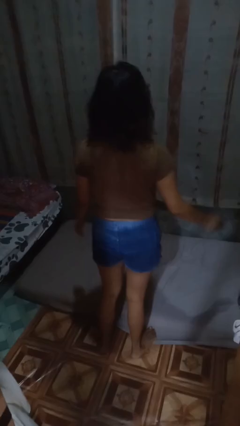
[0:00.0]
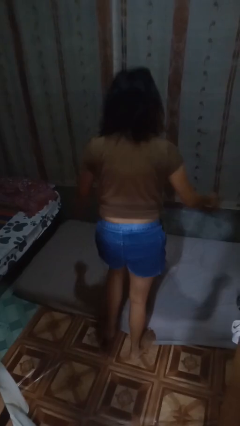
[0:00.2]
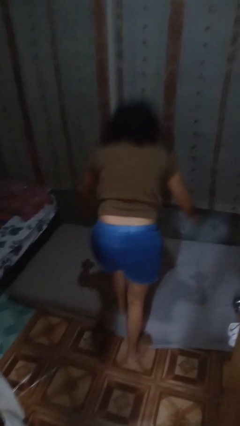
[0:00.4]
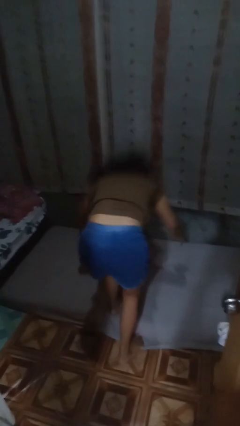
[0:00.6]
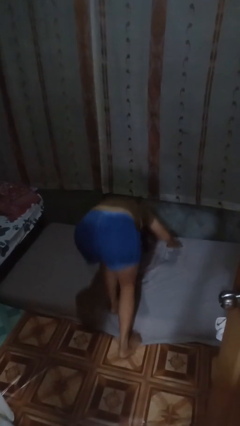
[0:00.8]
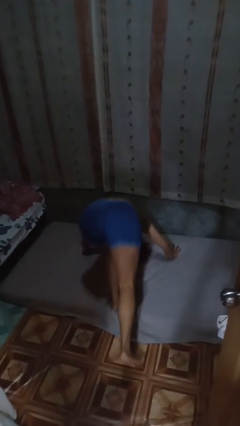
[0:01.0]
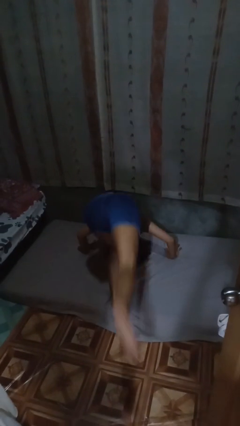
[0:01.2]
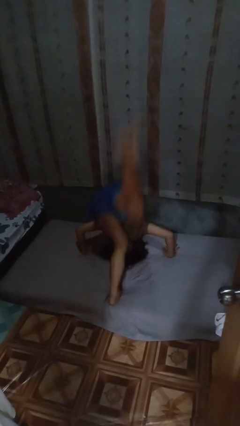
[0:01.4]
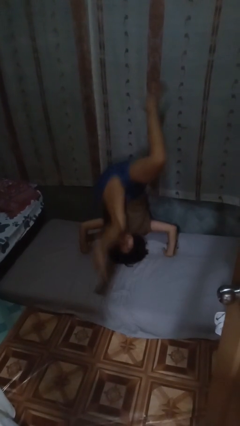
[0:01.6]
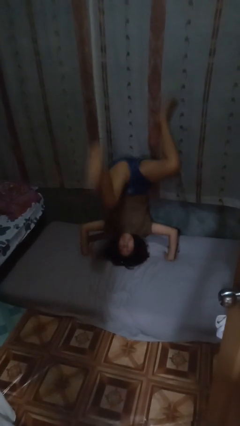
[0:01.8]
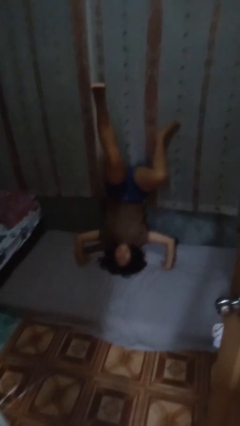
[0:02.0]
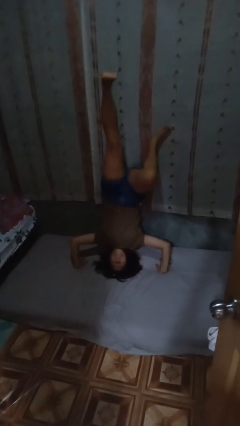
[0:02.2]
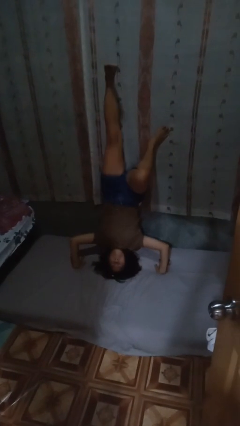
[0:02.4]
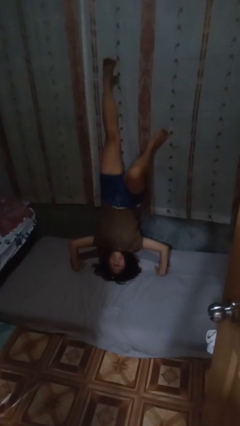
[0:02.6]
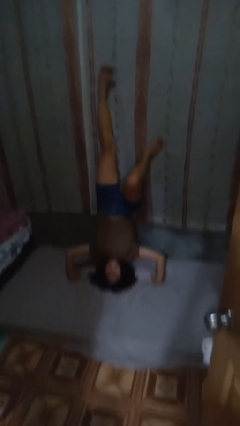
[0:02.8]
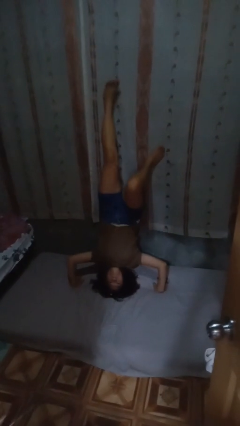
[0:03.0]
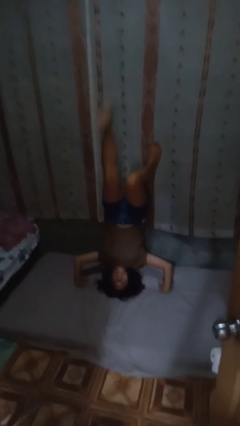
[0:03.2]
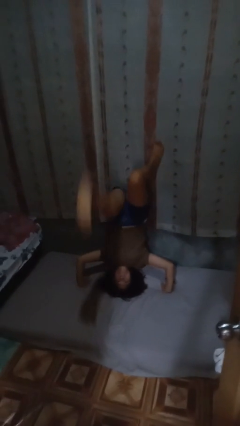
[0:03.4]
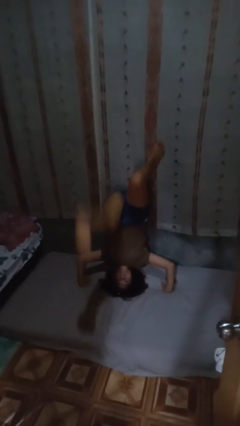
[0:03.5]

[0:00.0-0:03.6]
person handstand

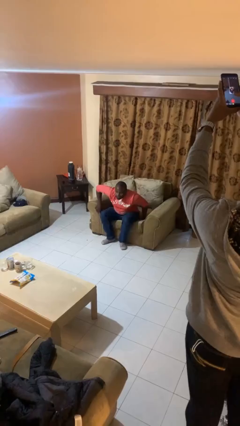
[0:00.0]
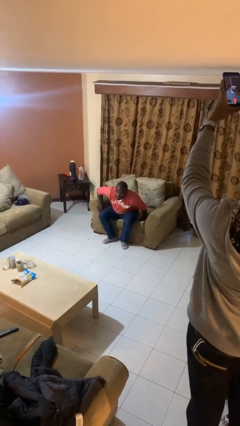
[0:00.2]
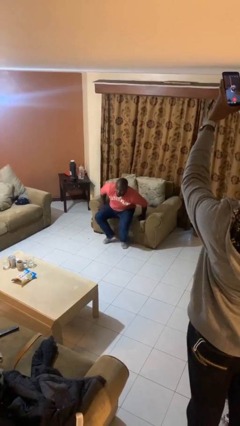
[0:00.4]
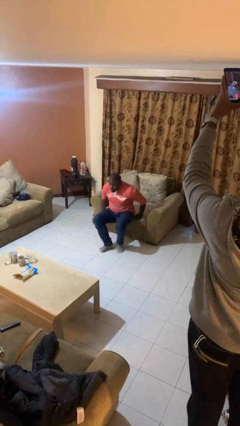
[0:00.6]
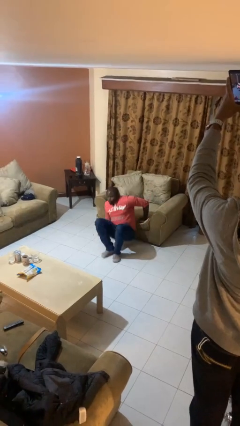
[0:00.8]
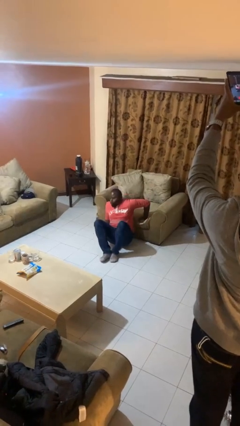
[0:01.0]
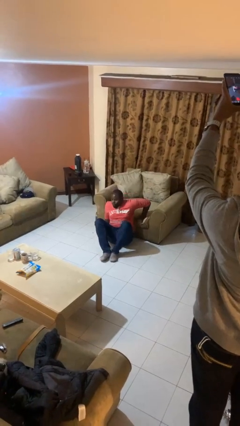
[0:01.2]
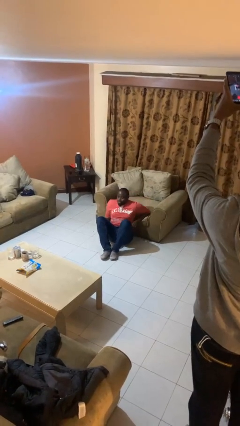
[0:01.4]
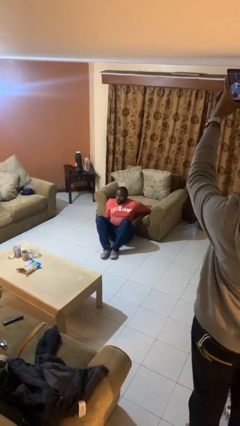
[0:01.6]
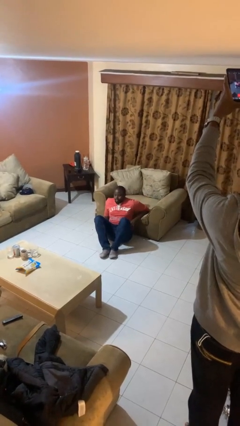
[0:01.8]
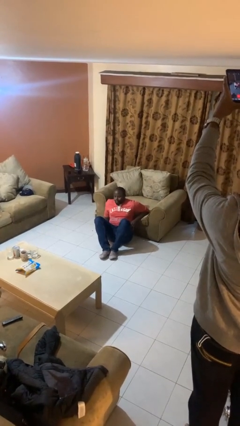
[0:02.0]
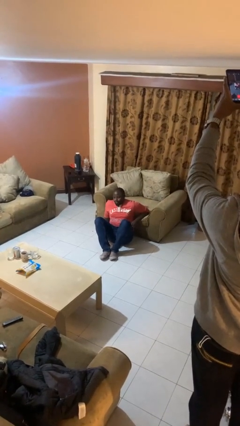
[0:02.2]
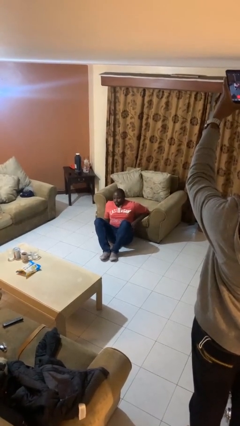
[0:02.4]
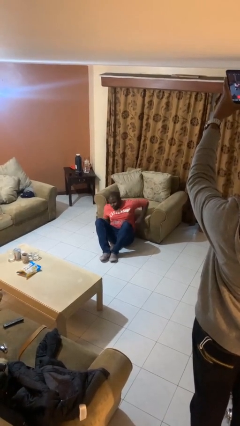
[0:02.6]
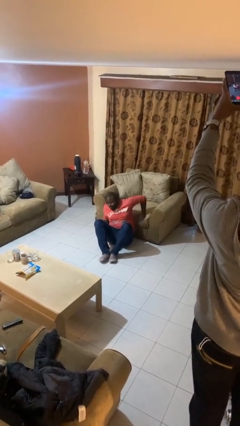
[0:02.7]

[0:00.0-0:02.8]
person falls from chair

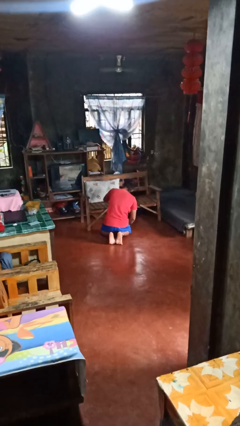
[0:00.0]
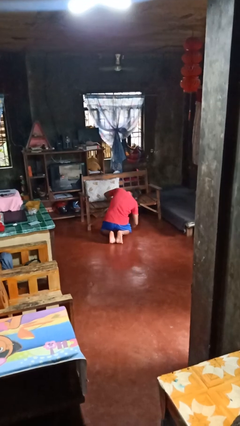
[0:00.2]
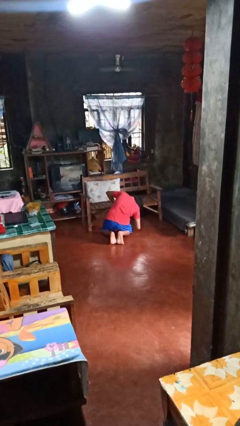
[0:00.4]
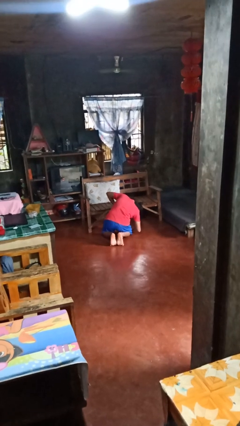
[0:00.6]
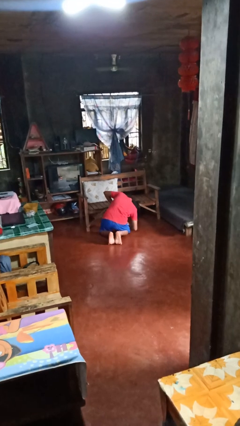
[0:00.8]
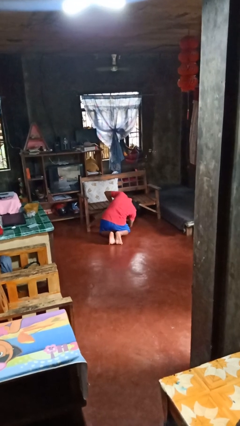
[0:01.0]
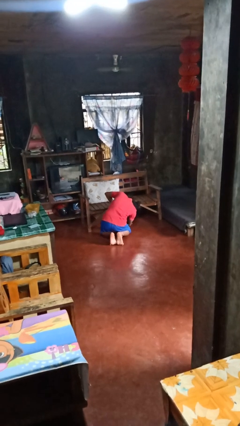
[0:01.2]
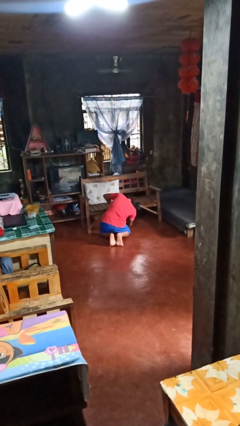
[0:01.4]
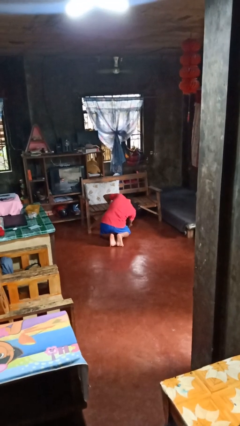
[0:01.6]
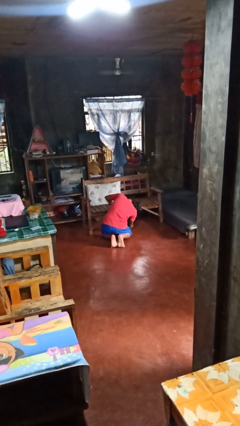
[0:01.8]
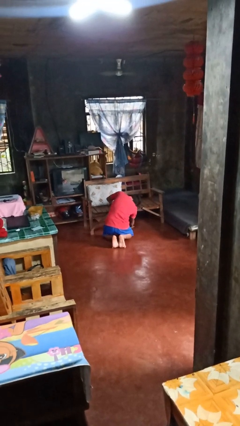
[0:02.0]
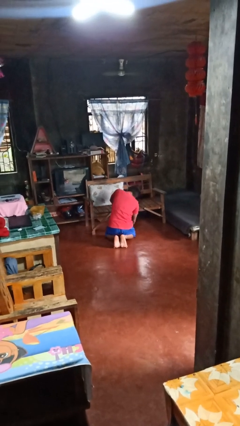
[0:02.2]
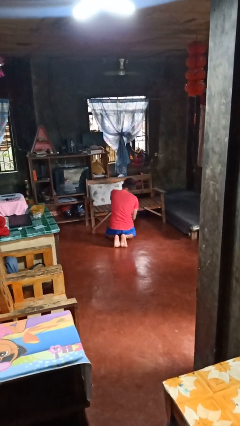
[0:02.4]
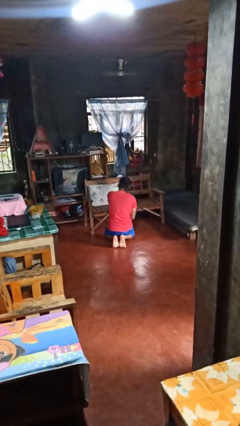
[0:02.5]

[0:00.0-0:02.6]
person searches under couch

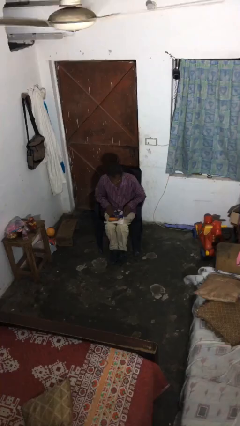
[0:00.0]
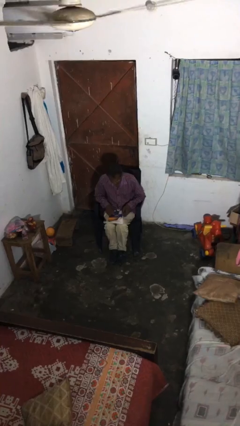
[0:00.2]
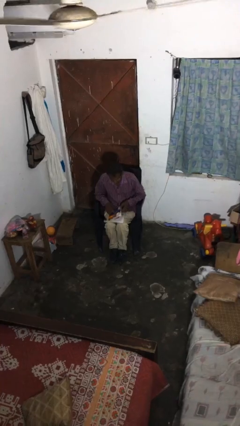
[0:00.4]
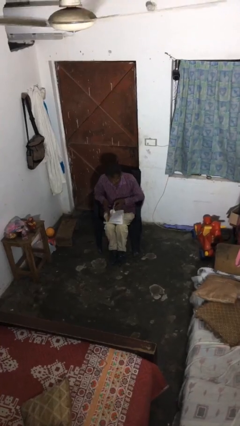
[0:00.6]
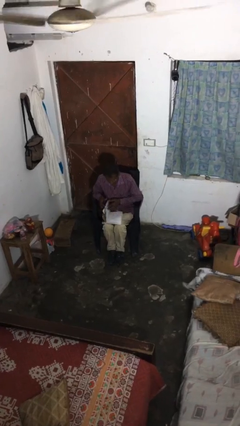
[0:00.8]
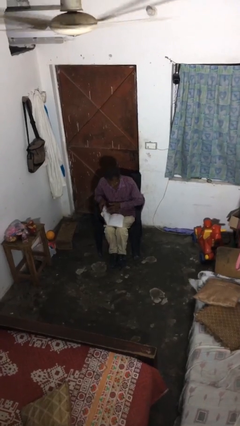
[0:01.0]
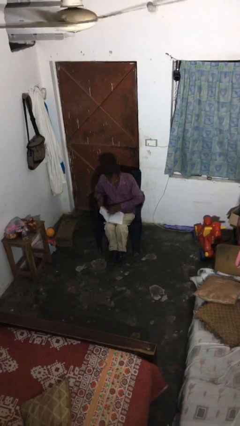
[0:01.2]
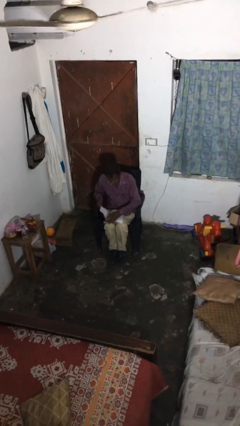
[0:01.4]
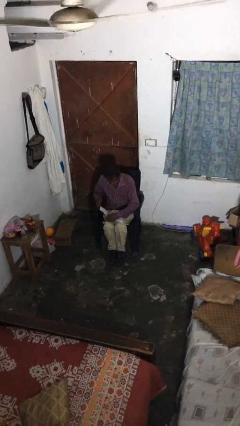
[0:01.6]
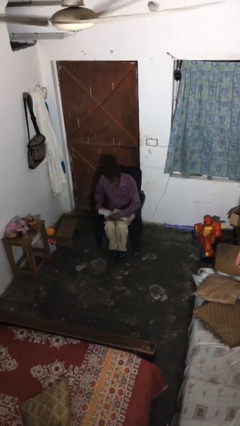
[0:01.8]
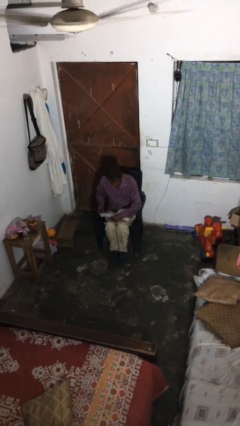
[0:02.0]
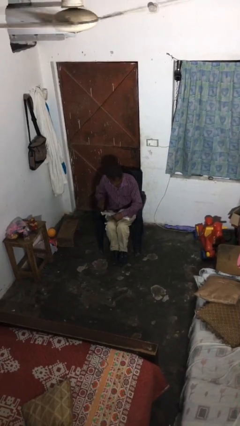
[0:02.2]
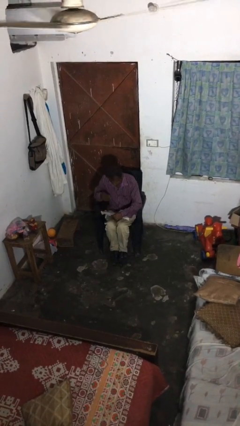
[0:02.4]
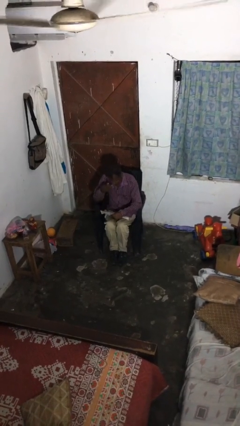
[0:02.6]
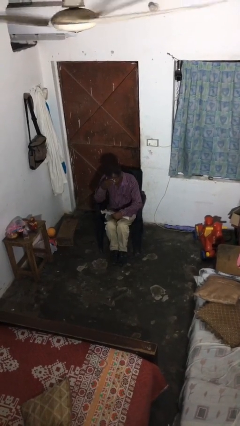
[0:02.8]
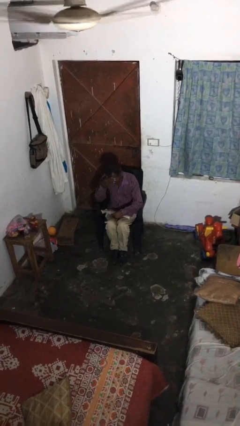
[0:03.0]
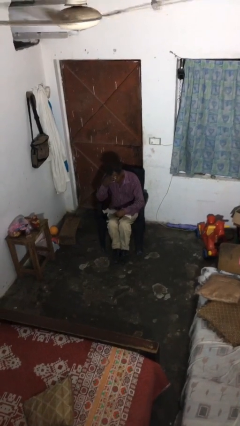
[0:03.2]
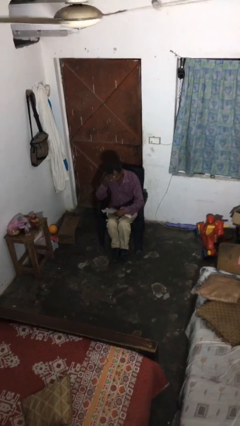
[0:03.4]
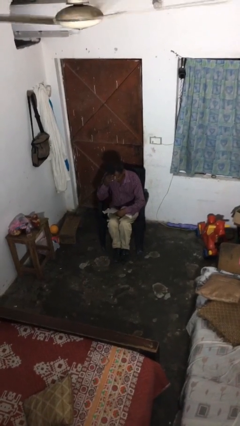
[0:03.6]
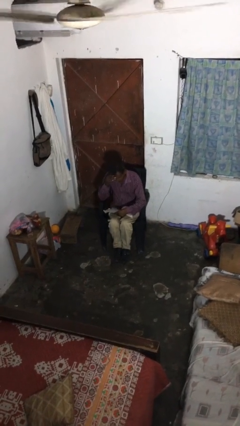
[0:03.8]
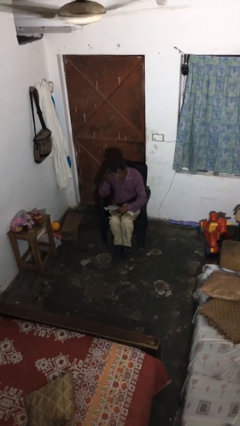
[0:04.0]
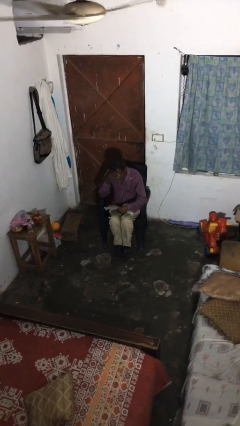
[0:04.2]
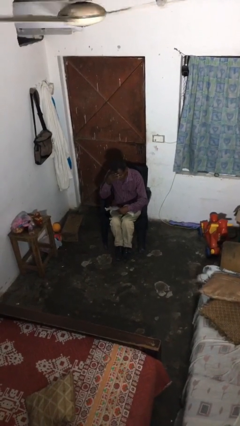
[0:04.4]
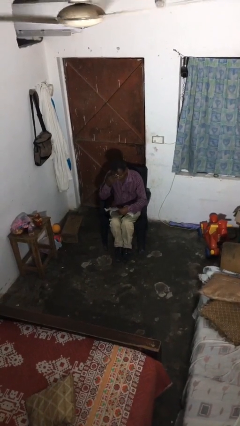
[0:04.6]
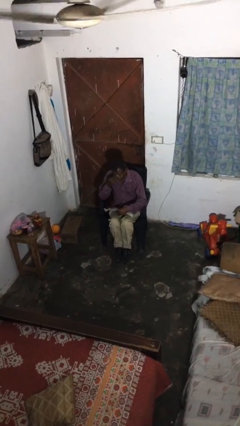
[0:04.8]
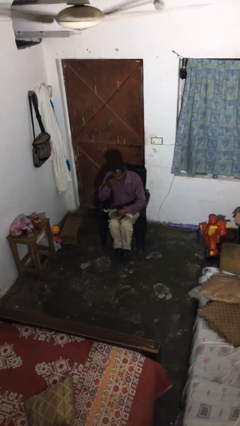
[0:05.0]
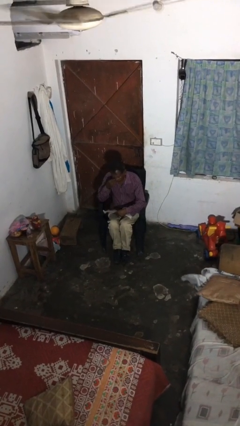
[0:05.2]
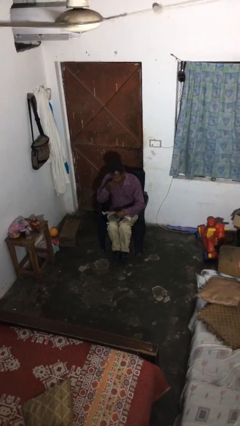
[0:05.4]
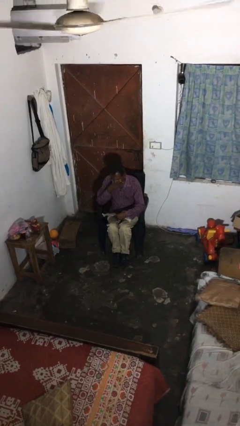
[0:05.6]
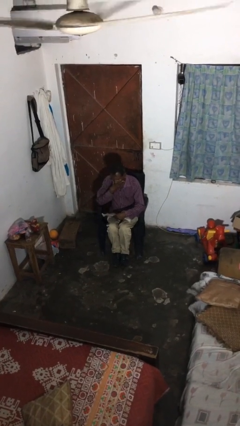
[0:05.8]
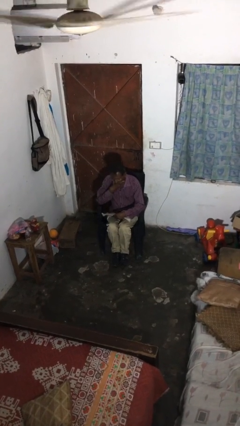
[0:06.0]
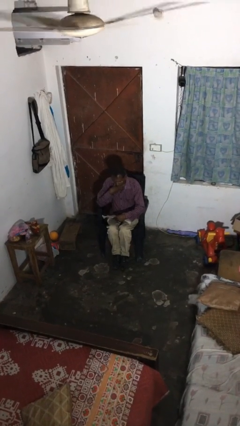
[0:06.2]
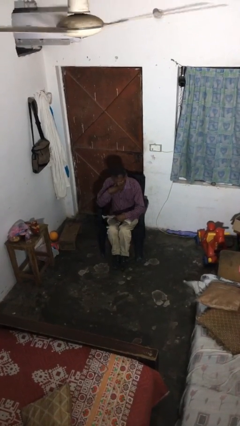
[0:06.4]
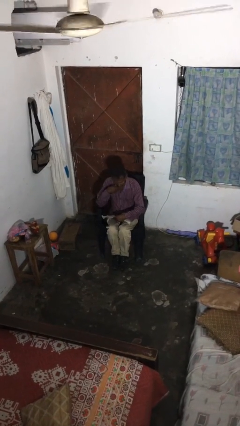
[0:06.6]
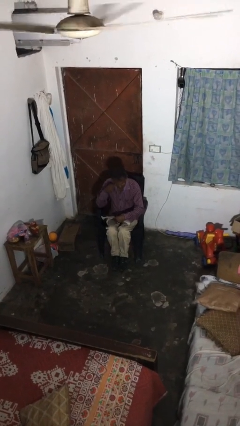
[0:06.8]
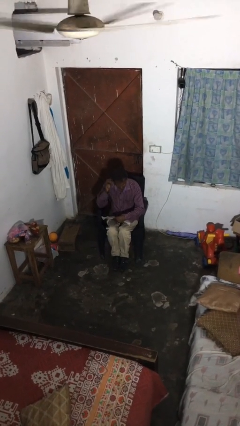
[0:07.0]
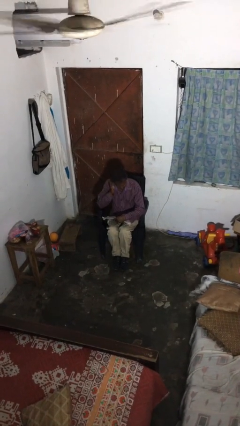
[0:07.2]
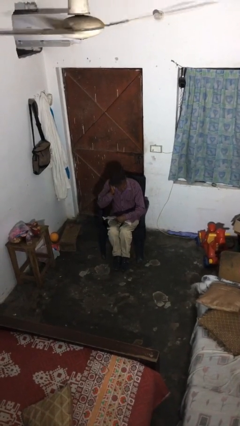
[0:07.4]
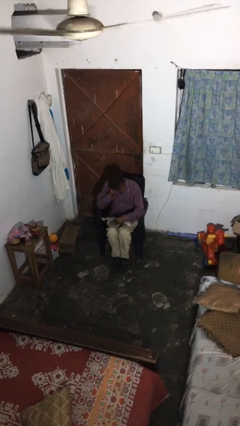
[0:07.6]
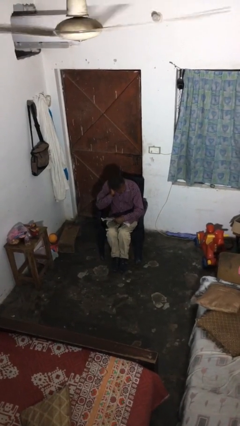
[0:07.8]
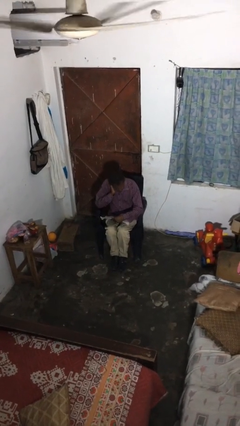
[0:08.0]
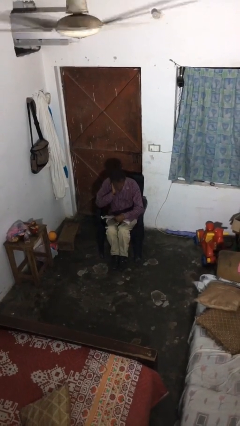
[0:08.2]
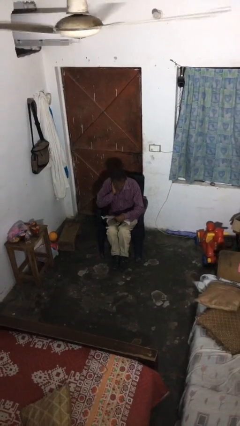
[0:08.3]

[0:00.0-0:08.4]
person reads document

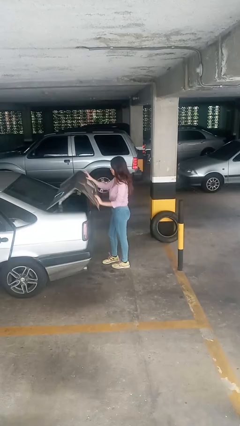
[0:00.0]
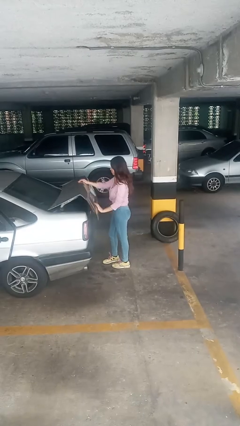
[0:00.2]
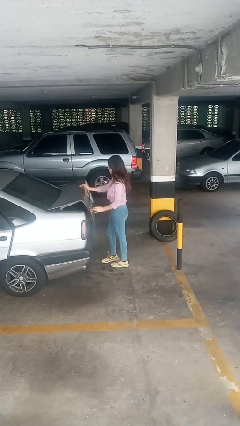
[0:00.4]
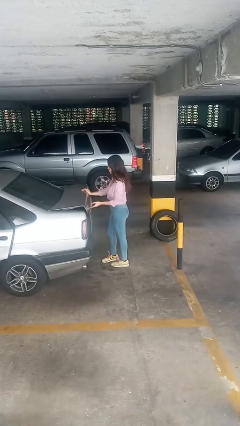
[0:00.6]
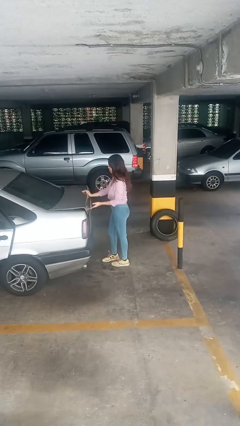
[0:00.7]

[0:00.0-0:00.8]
person closes car trunk
